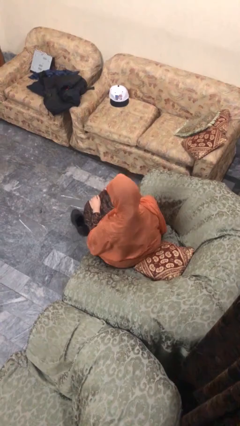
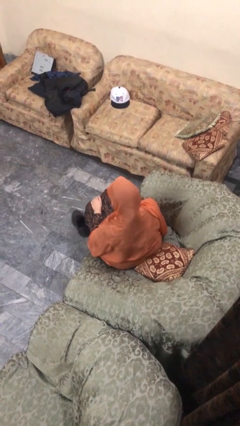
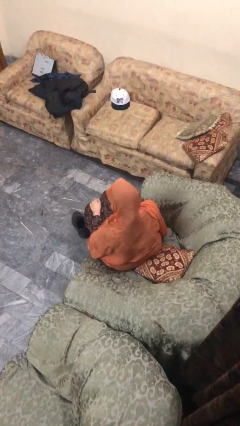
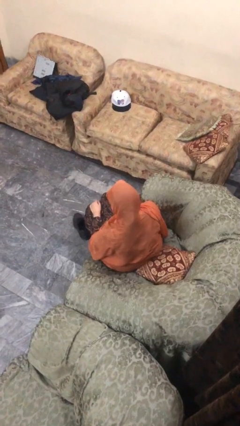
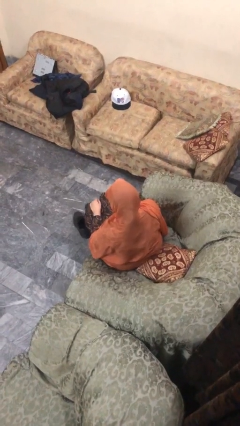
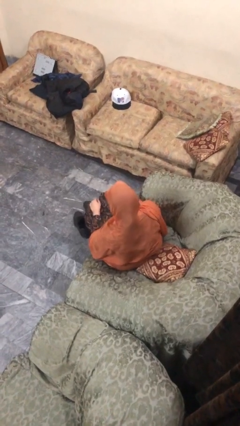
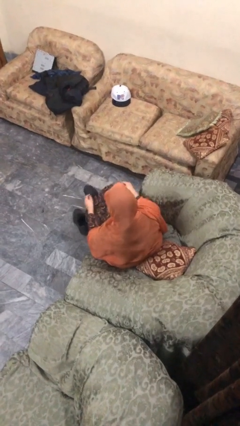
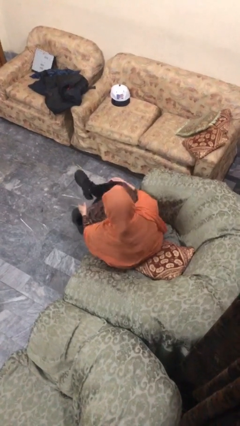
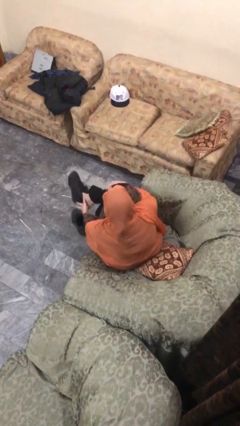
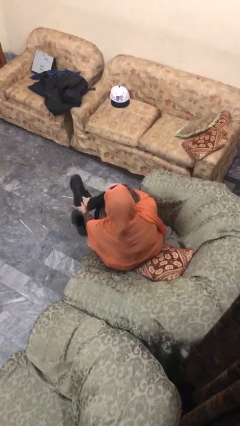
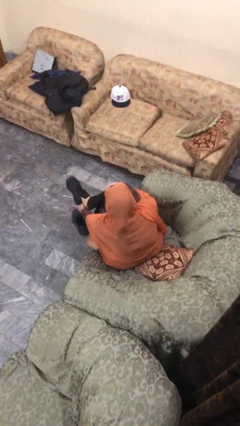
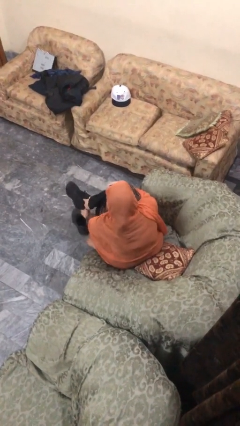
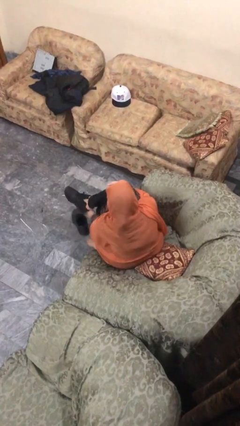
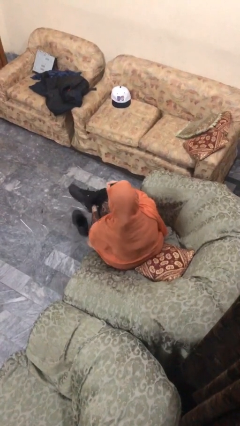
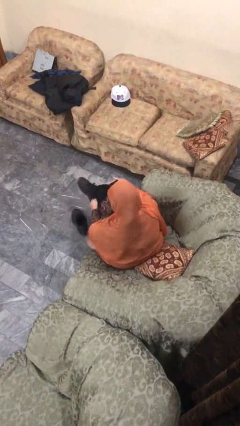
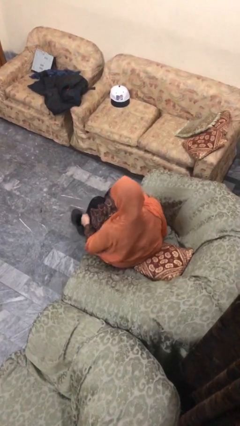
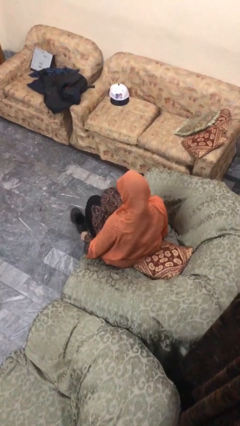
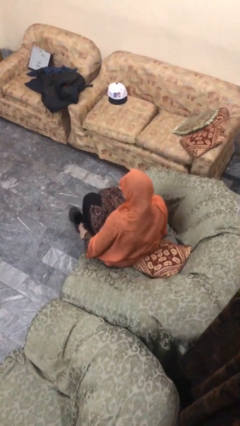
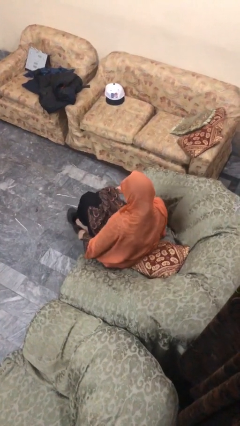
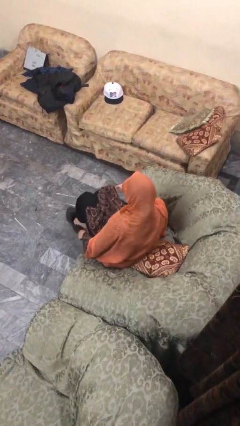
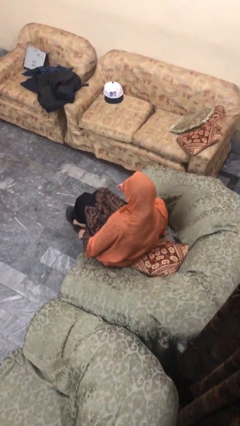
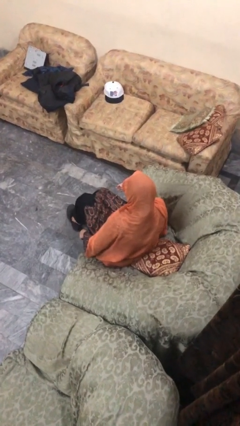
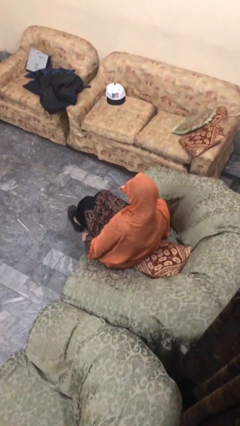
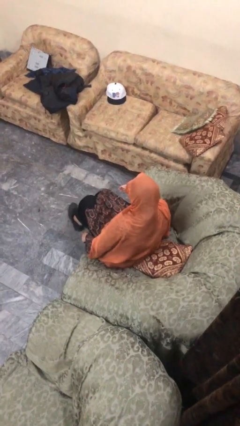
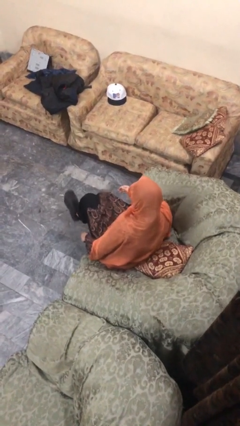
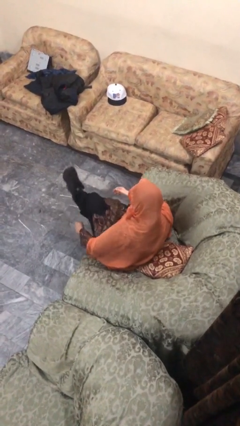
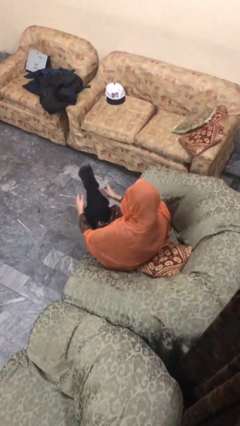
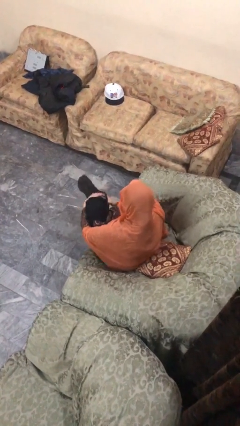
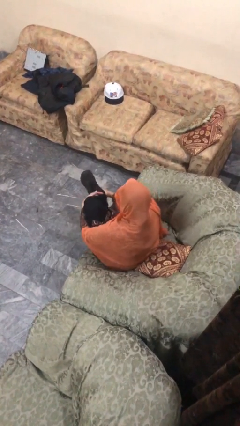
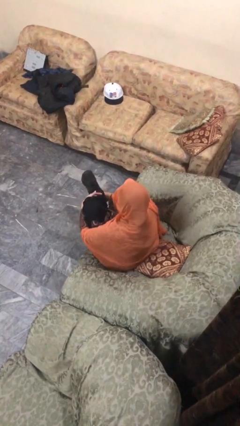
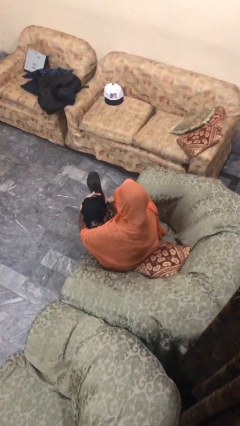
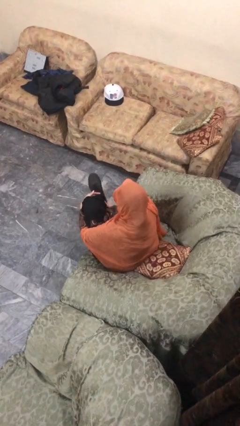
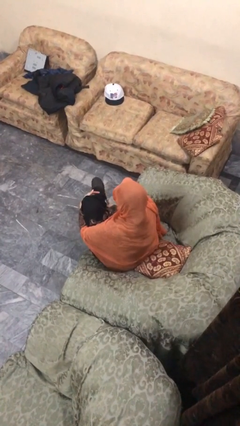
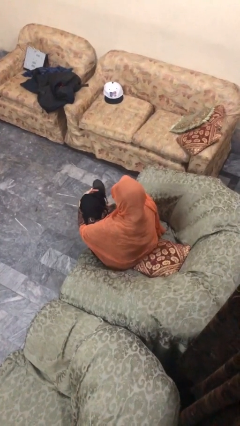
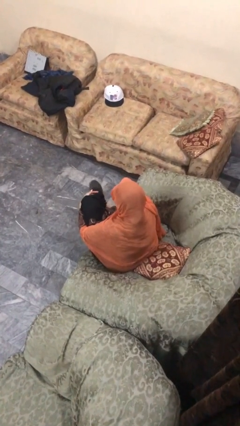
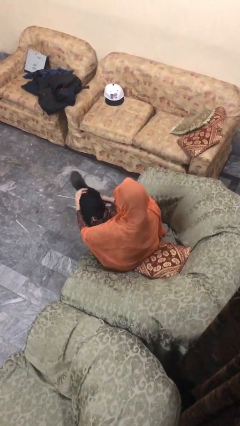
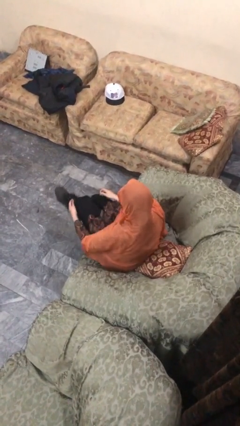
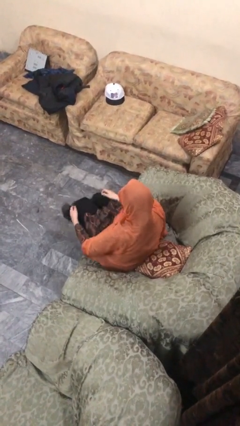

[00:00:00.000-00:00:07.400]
person puts on shoes

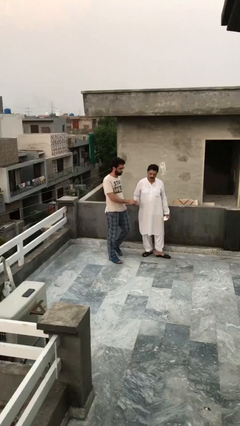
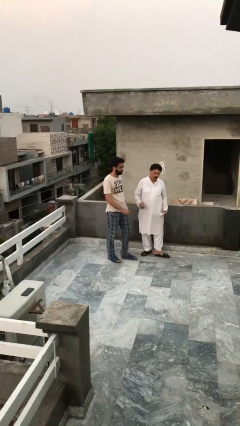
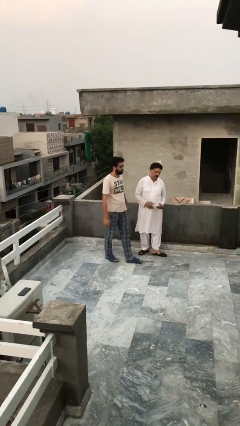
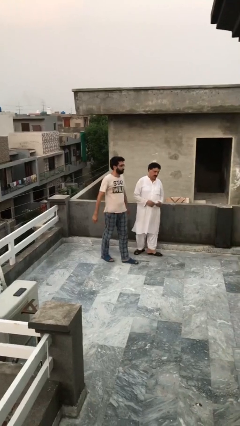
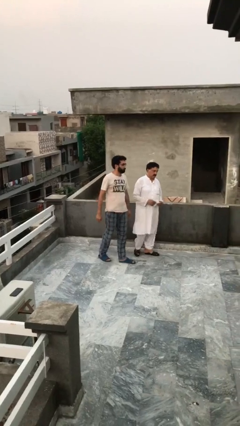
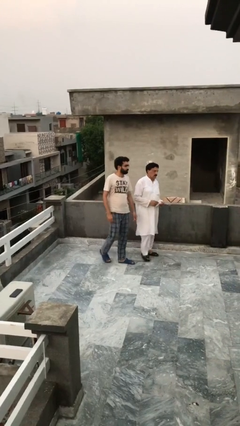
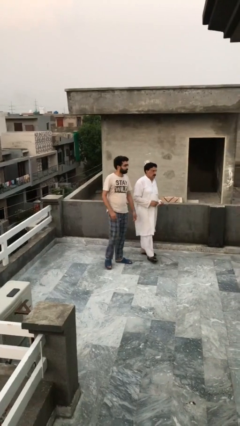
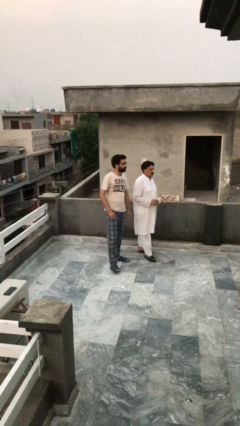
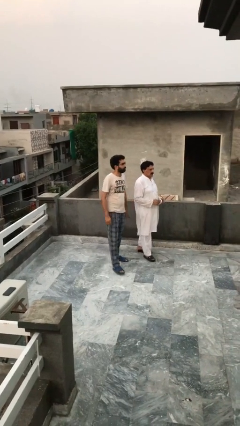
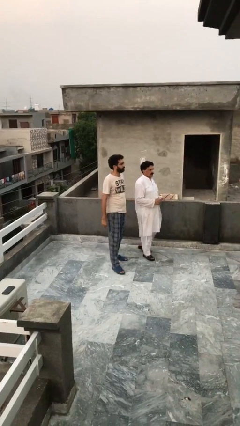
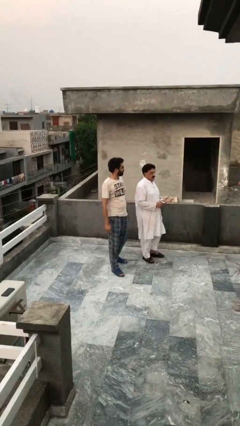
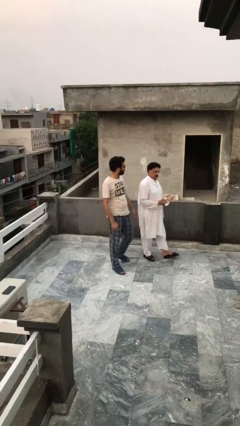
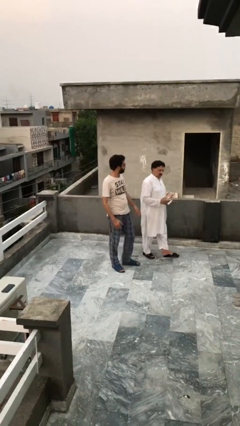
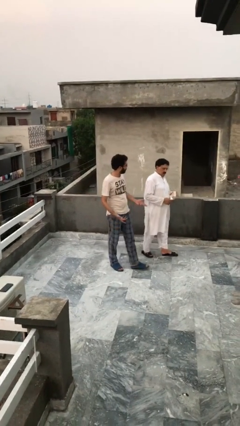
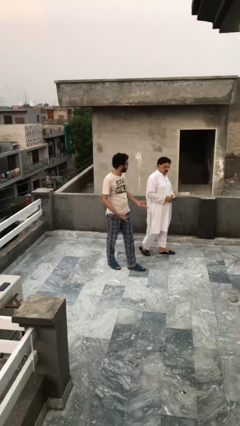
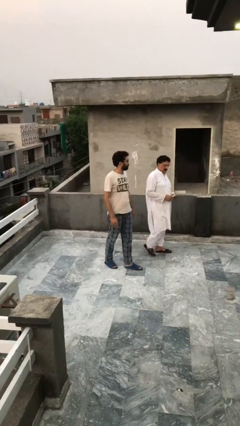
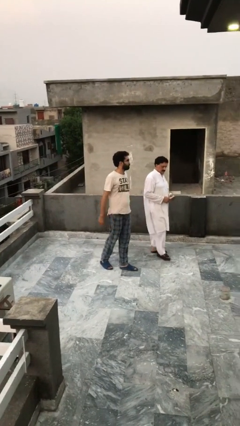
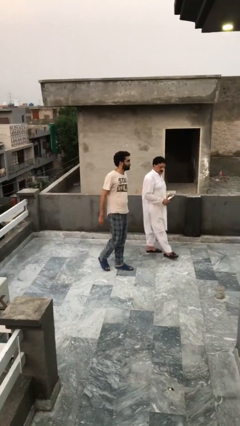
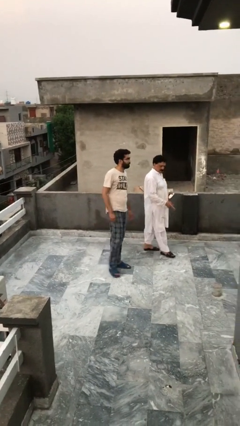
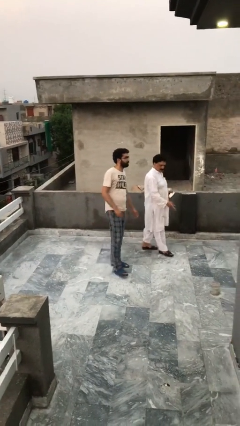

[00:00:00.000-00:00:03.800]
person talks to person

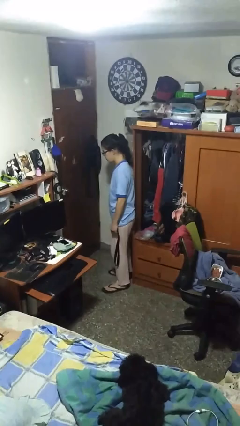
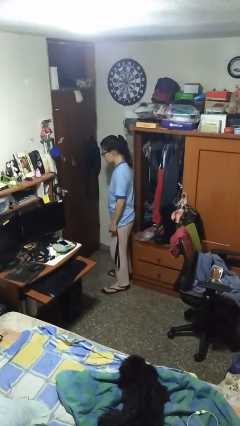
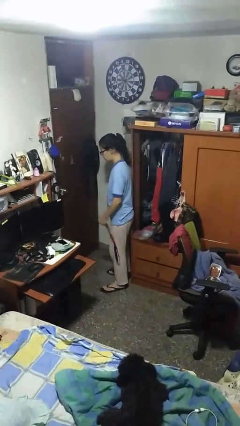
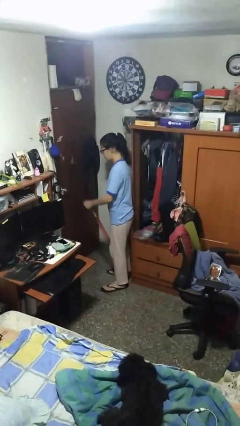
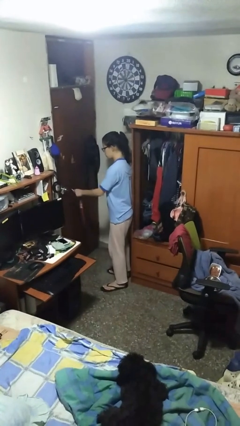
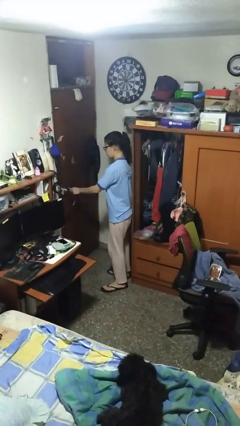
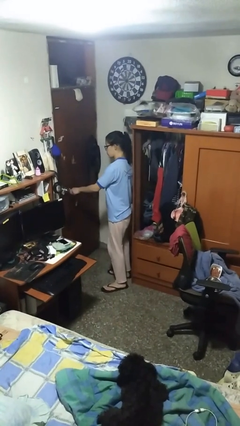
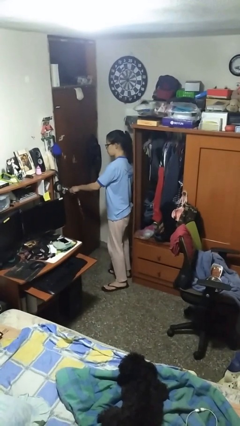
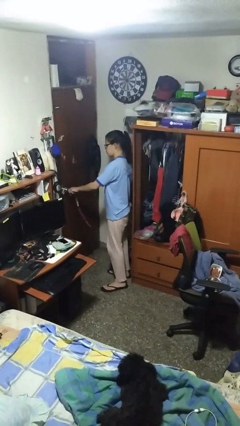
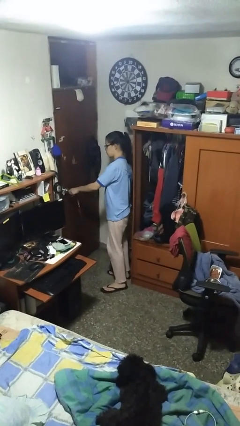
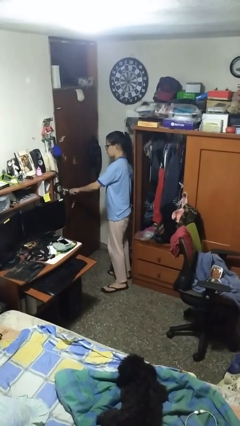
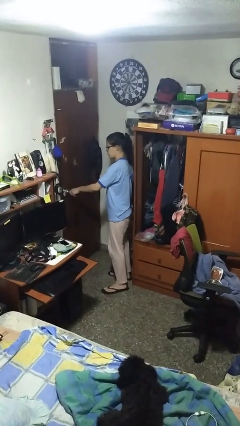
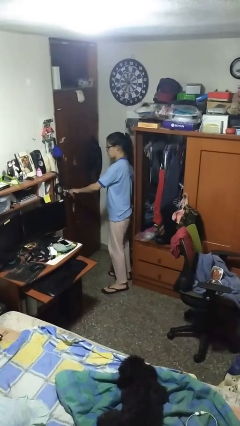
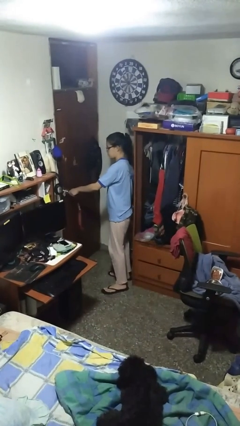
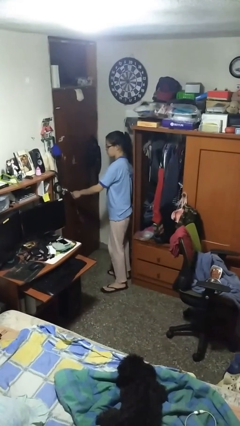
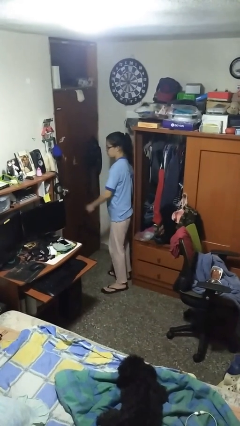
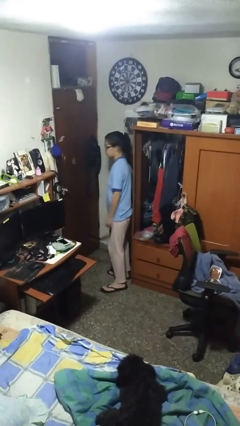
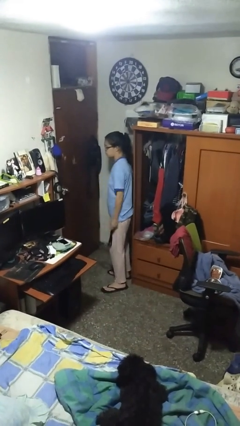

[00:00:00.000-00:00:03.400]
person unlocks door with keys

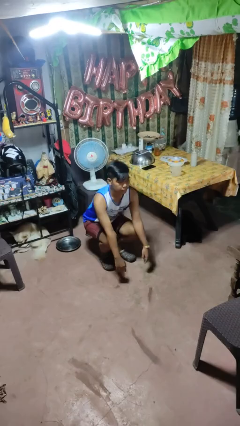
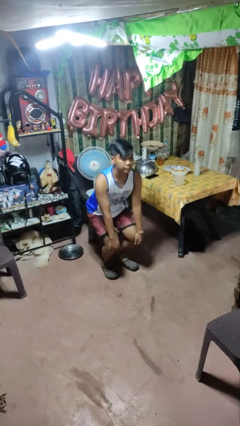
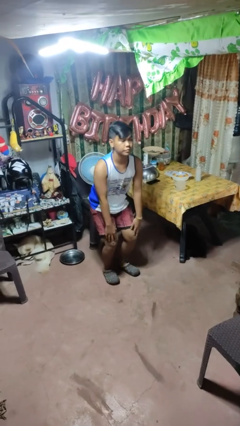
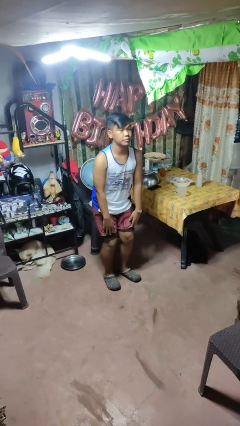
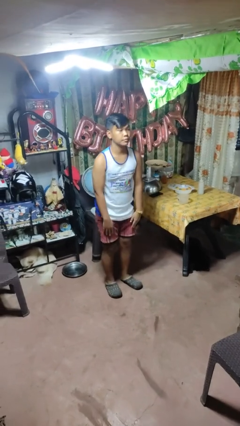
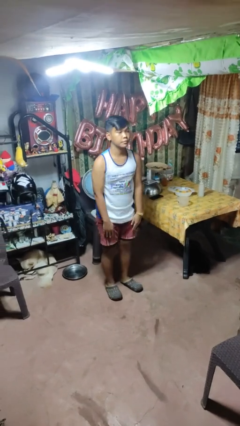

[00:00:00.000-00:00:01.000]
person stands up

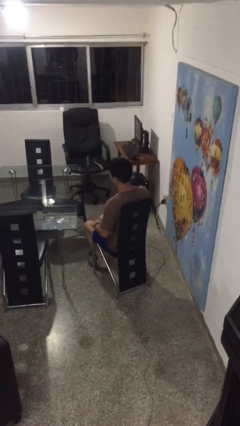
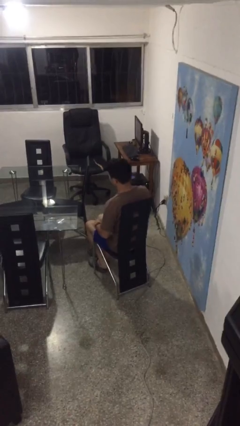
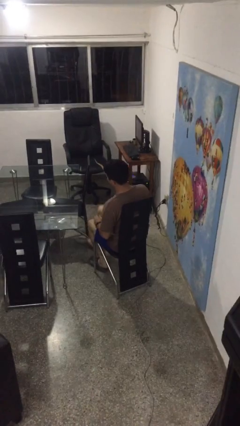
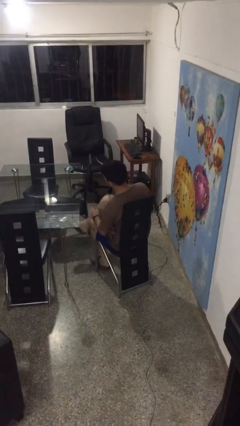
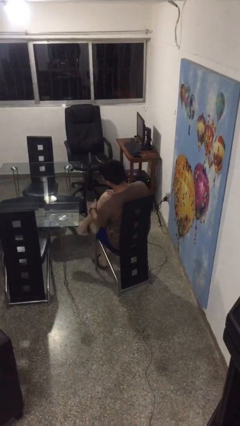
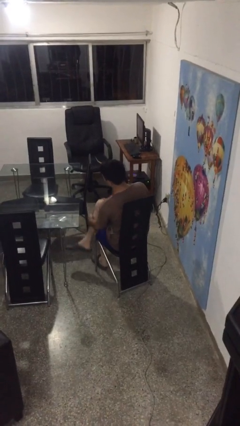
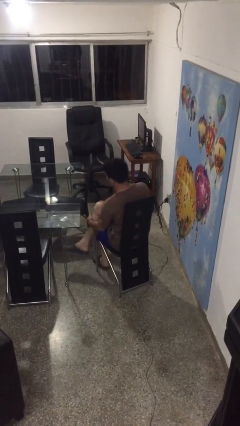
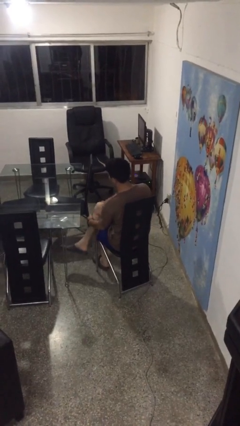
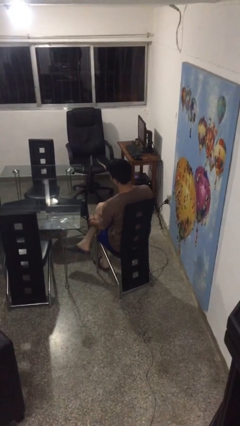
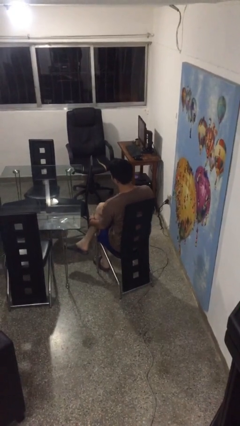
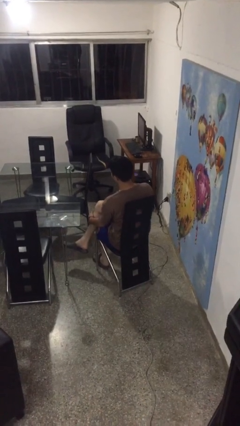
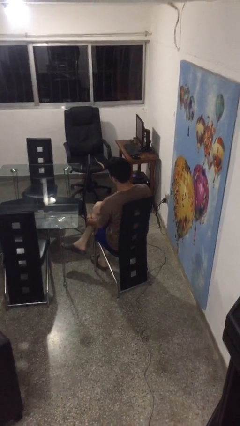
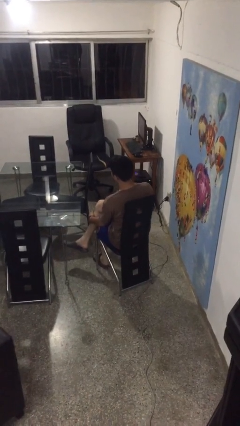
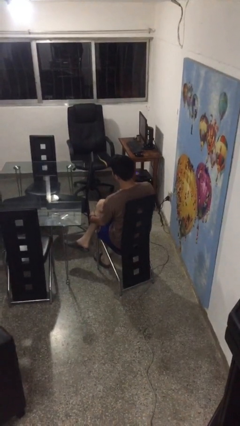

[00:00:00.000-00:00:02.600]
person crosses legs
